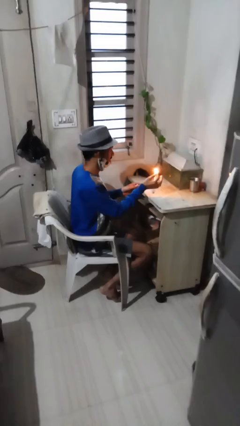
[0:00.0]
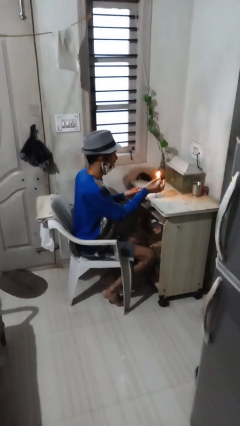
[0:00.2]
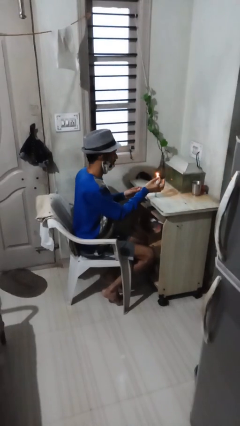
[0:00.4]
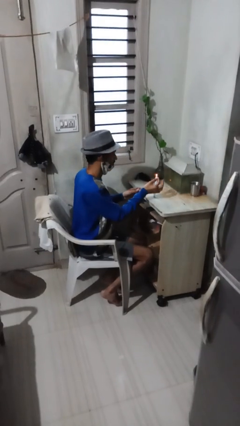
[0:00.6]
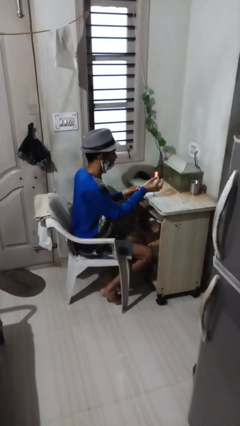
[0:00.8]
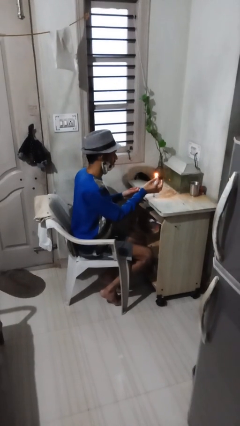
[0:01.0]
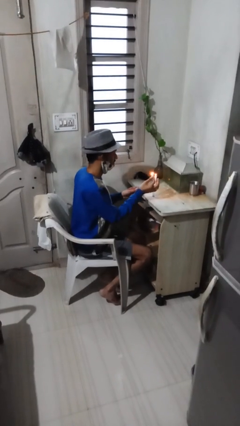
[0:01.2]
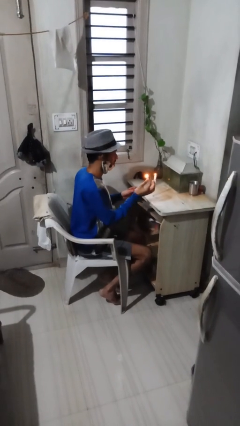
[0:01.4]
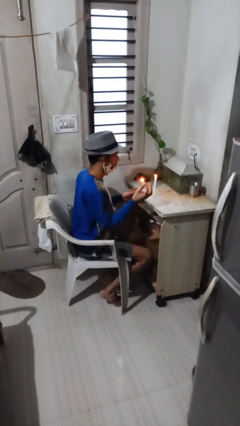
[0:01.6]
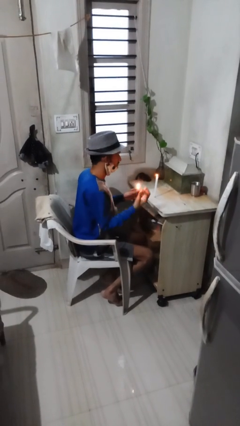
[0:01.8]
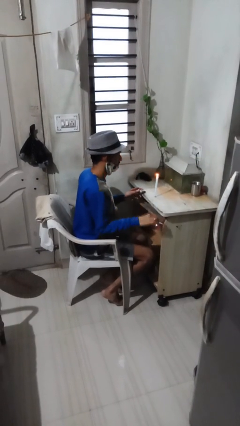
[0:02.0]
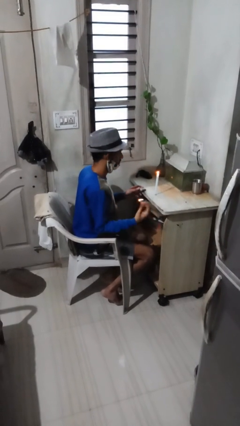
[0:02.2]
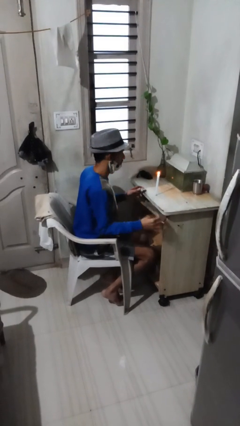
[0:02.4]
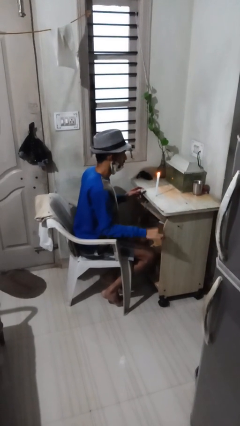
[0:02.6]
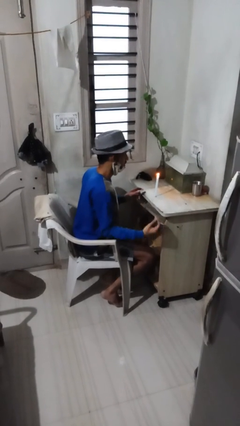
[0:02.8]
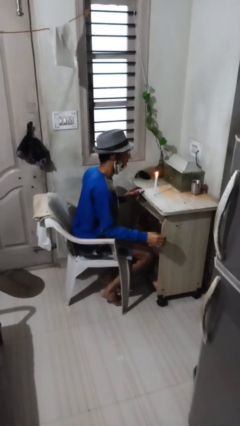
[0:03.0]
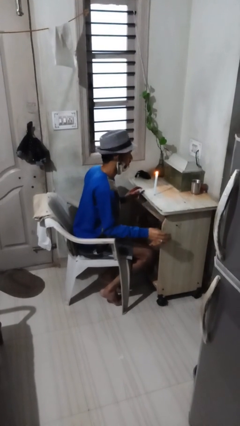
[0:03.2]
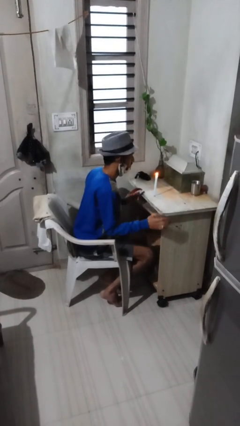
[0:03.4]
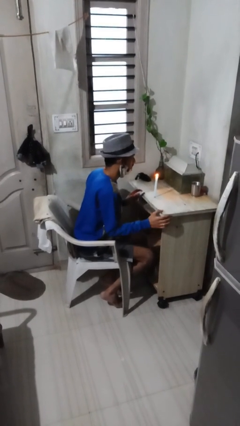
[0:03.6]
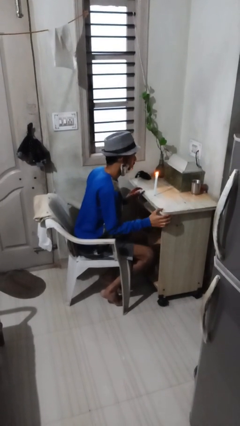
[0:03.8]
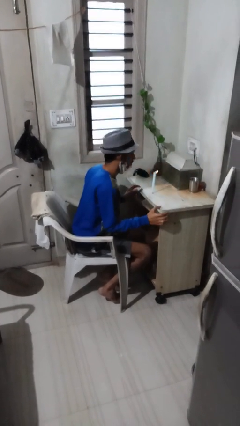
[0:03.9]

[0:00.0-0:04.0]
person lights candle

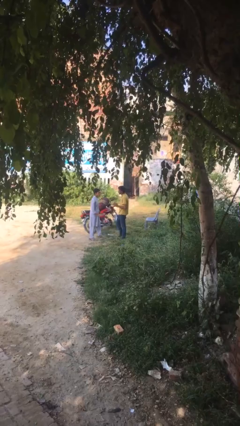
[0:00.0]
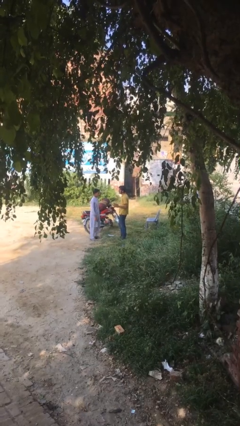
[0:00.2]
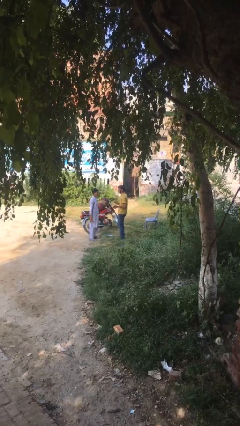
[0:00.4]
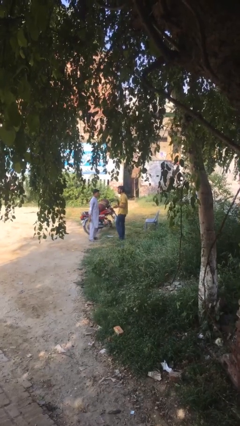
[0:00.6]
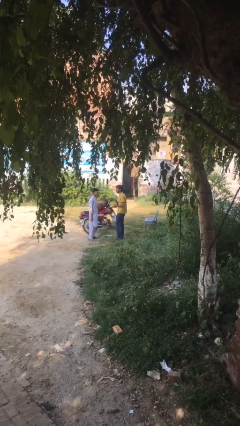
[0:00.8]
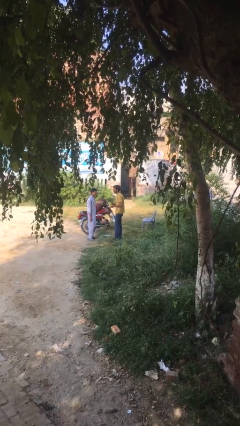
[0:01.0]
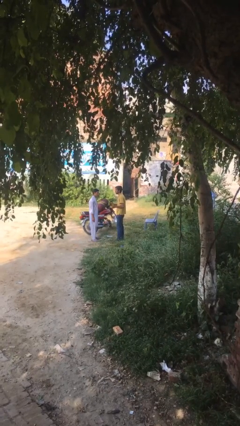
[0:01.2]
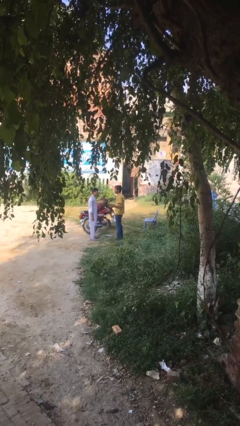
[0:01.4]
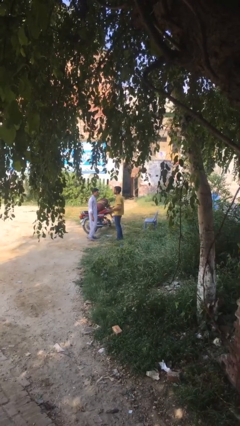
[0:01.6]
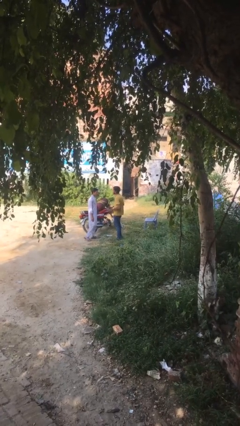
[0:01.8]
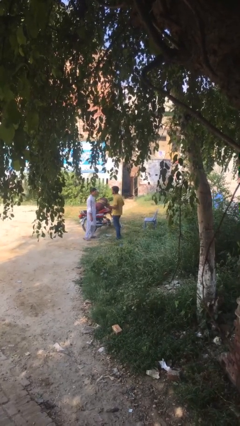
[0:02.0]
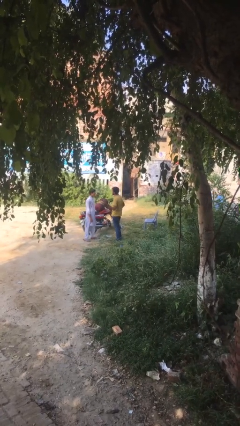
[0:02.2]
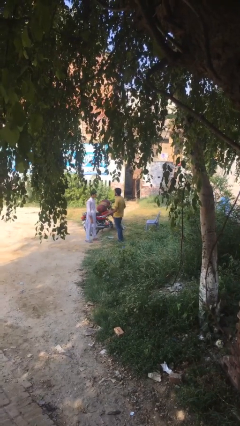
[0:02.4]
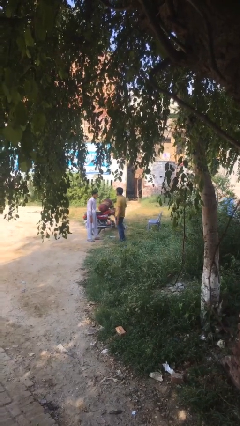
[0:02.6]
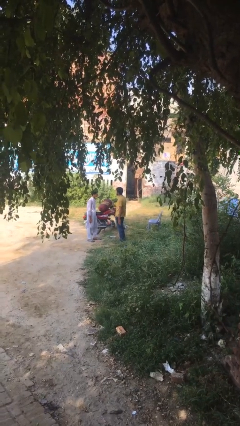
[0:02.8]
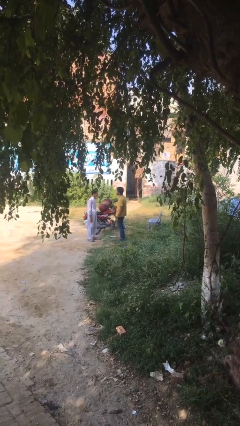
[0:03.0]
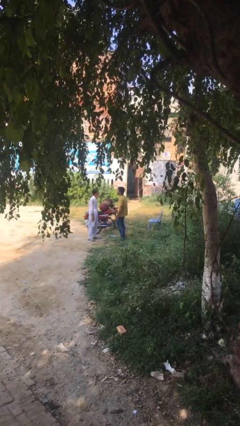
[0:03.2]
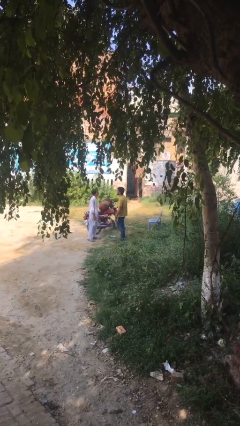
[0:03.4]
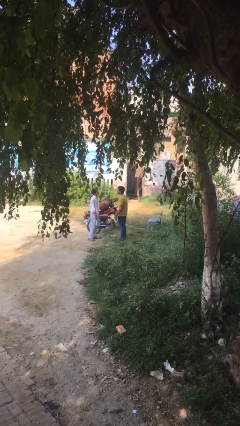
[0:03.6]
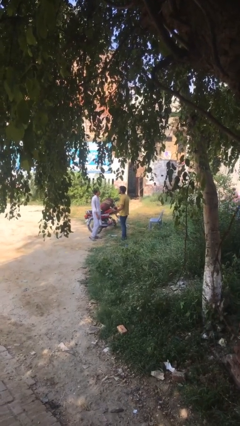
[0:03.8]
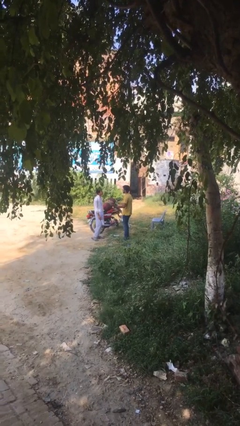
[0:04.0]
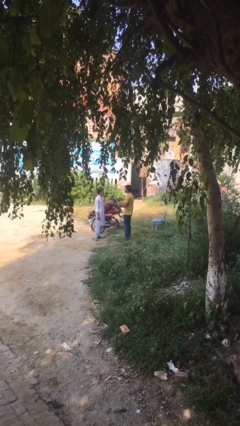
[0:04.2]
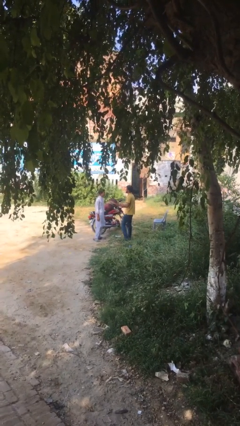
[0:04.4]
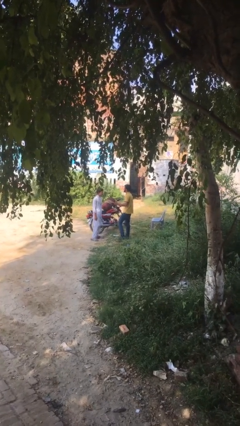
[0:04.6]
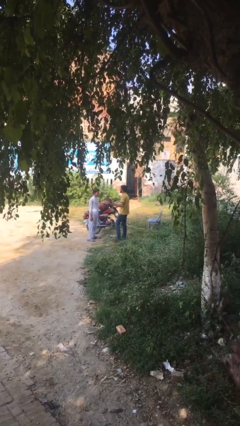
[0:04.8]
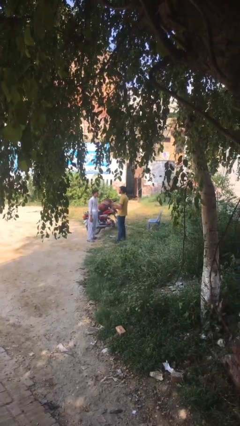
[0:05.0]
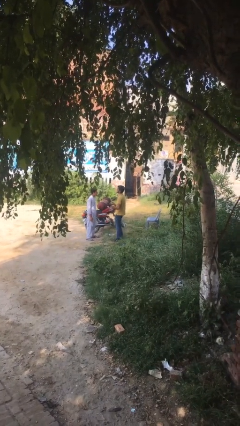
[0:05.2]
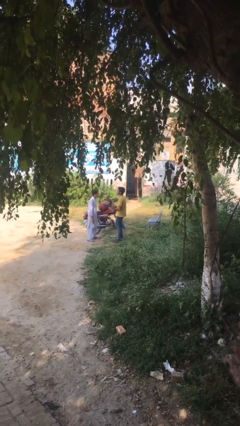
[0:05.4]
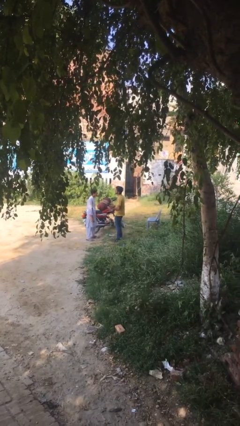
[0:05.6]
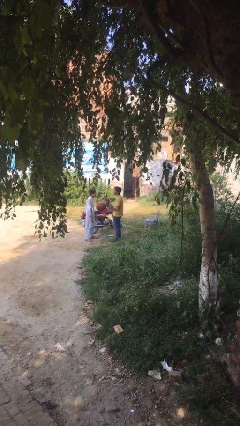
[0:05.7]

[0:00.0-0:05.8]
person talks to person

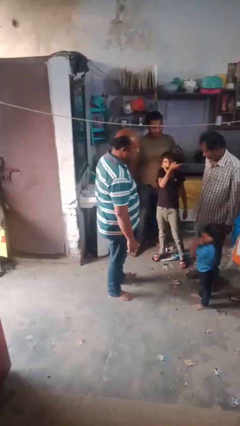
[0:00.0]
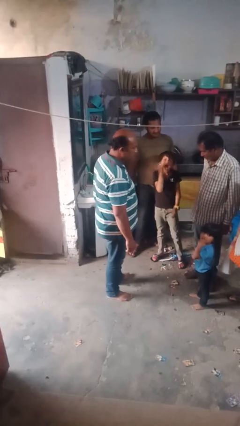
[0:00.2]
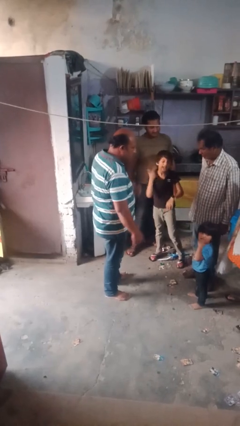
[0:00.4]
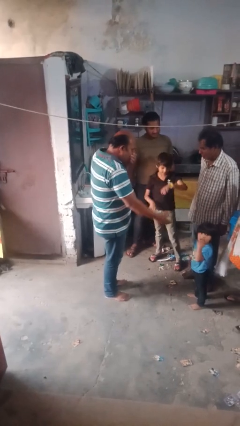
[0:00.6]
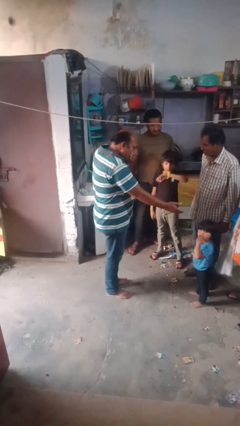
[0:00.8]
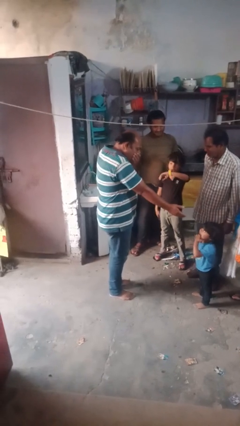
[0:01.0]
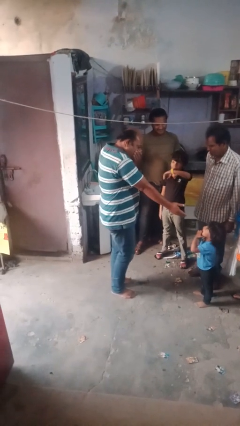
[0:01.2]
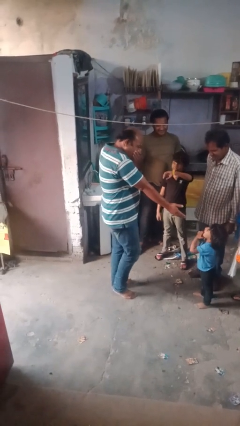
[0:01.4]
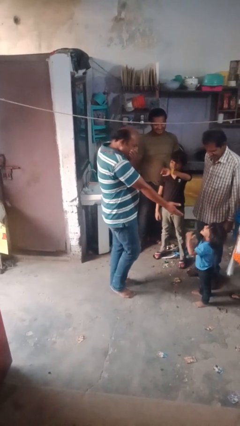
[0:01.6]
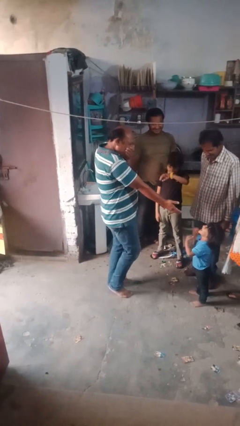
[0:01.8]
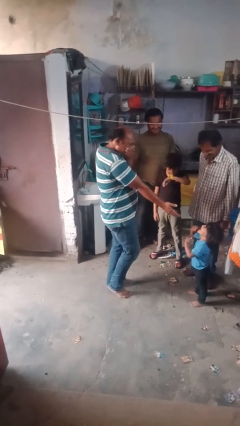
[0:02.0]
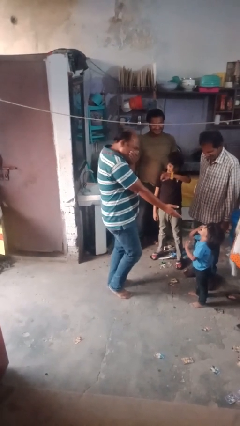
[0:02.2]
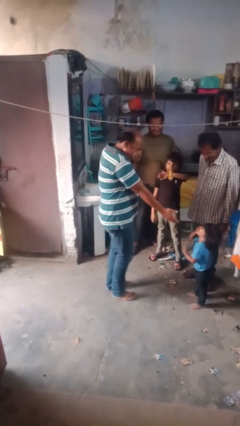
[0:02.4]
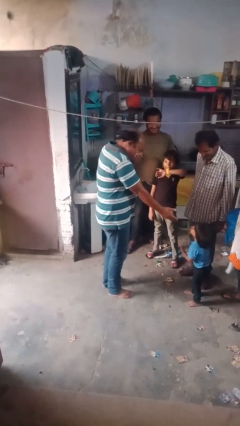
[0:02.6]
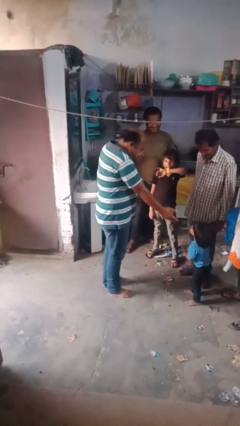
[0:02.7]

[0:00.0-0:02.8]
person laughs with person

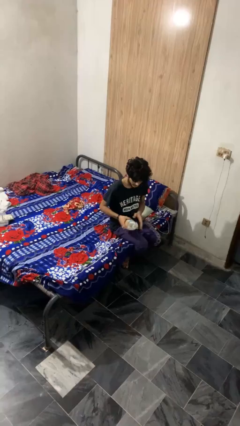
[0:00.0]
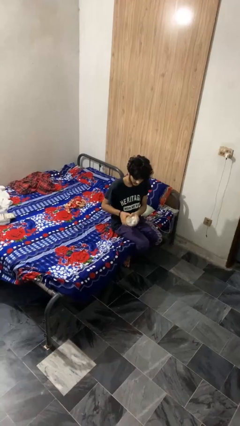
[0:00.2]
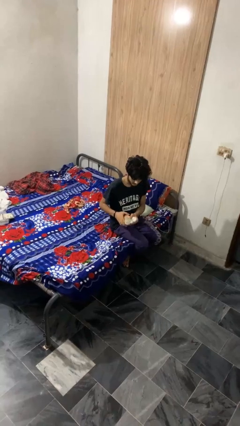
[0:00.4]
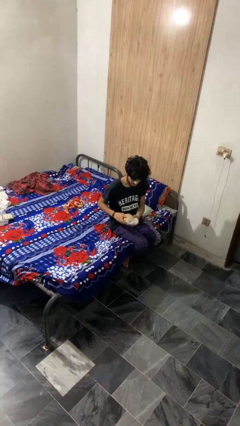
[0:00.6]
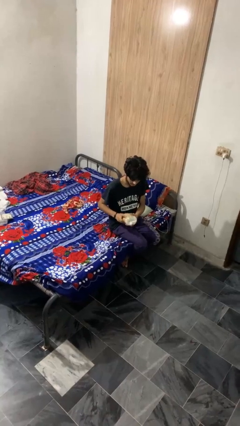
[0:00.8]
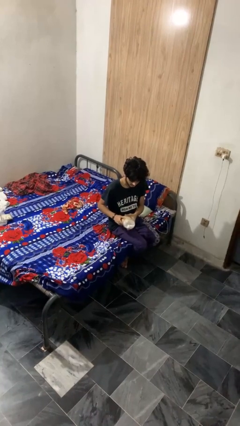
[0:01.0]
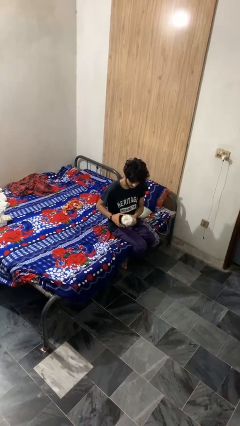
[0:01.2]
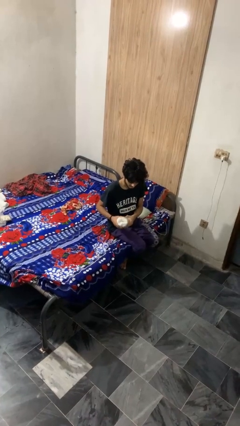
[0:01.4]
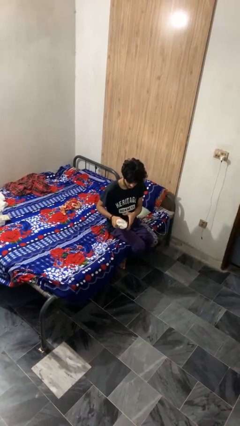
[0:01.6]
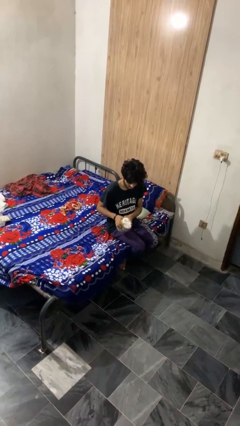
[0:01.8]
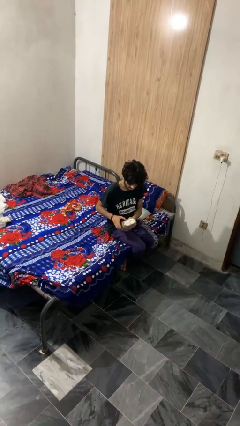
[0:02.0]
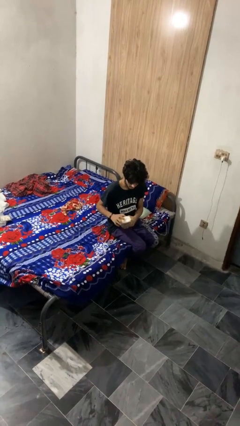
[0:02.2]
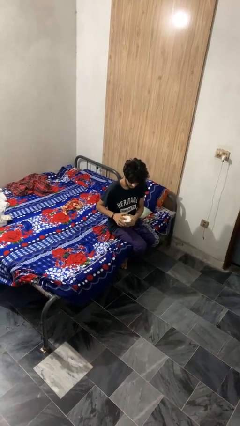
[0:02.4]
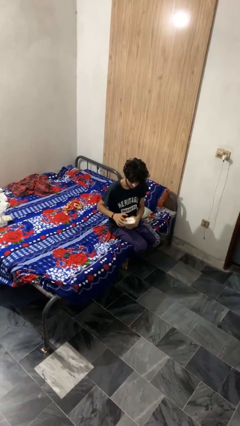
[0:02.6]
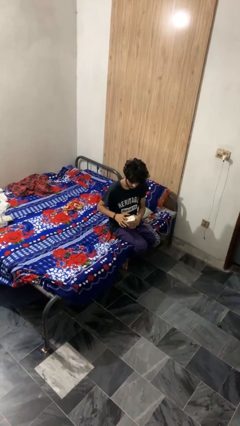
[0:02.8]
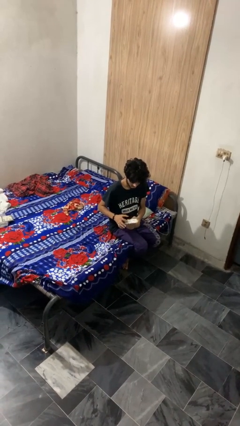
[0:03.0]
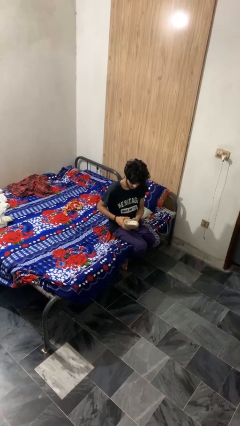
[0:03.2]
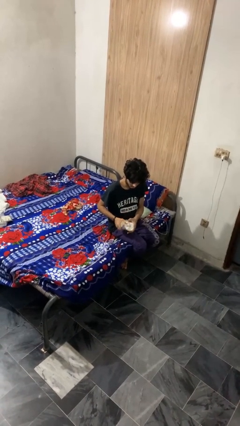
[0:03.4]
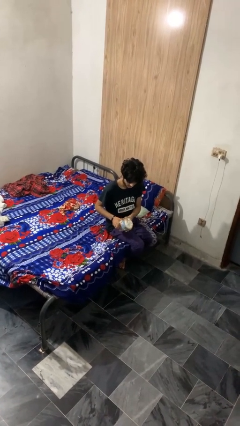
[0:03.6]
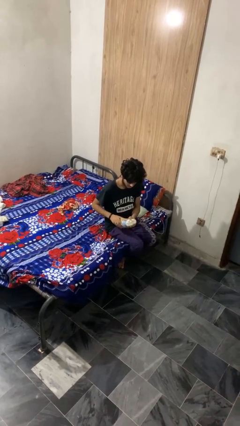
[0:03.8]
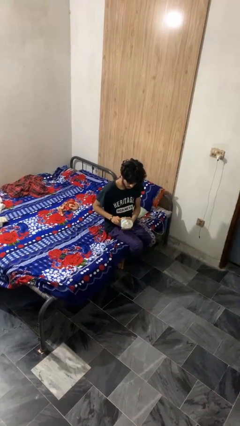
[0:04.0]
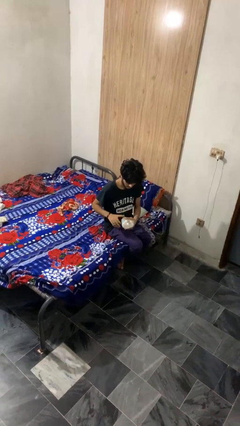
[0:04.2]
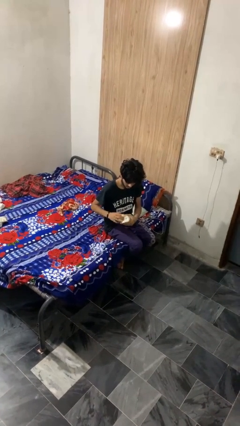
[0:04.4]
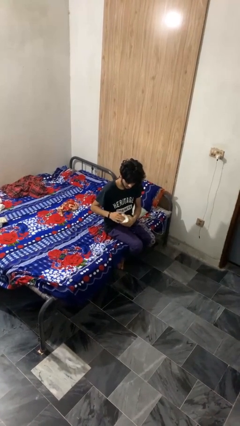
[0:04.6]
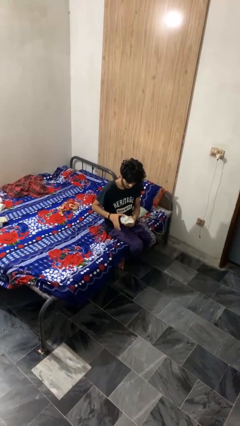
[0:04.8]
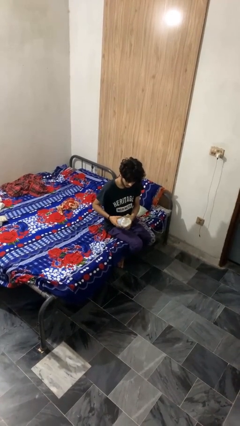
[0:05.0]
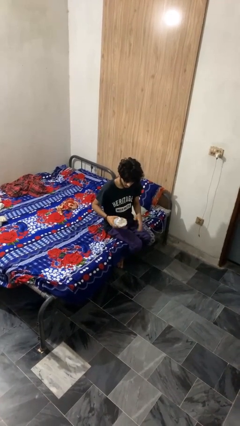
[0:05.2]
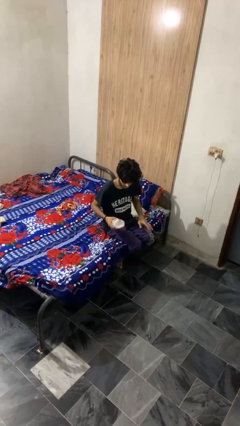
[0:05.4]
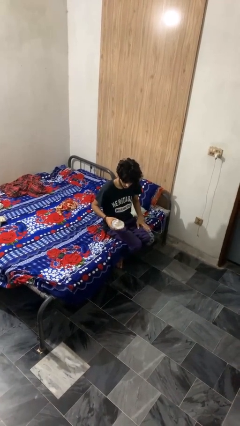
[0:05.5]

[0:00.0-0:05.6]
person squeezes object
